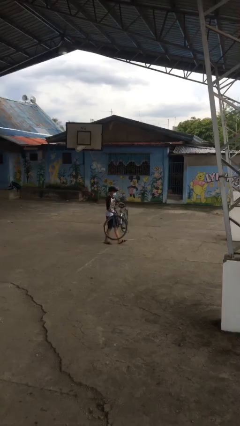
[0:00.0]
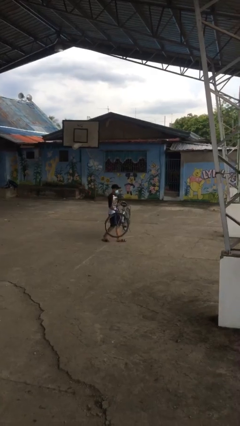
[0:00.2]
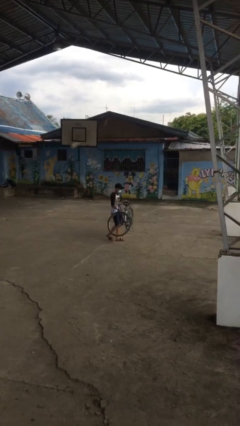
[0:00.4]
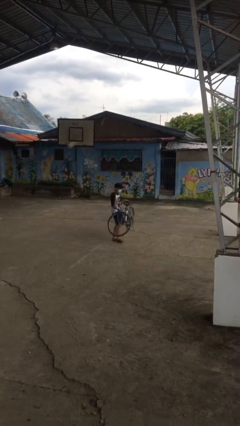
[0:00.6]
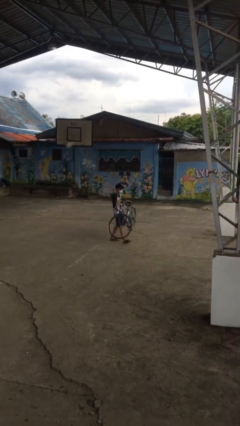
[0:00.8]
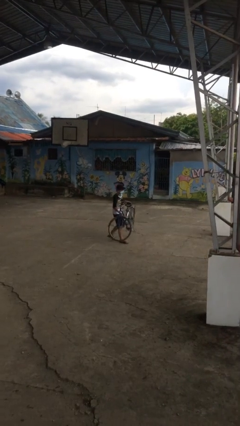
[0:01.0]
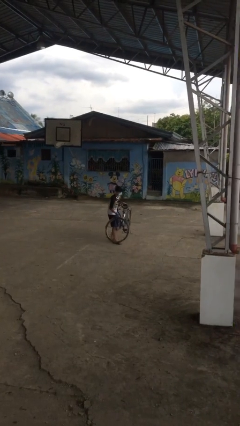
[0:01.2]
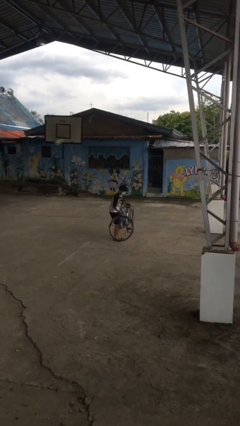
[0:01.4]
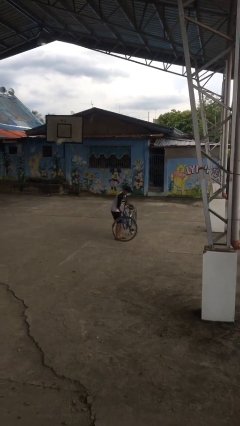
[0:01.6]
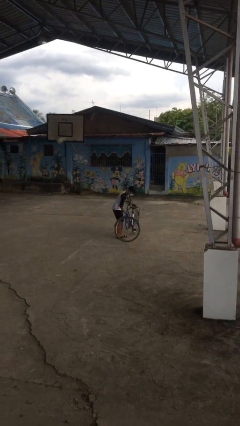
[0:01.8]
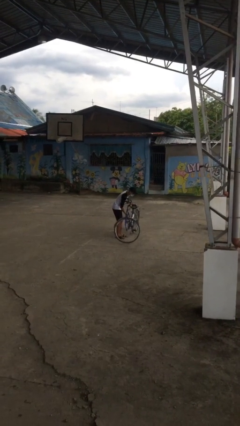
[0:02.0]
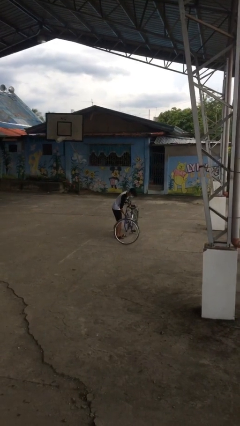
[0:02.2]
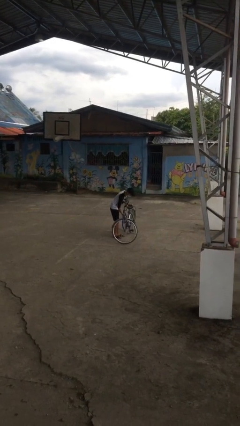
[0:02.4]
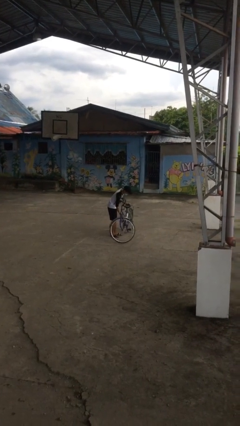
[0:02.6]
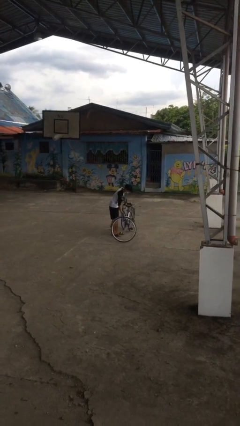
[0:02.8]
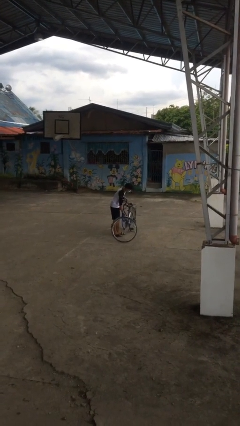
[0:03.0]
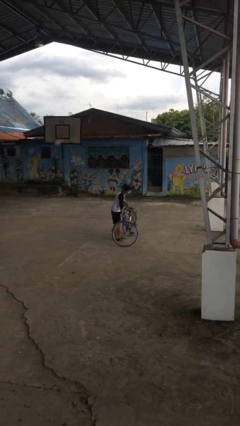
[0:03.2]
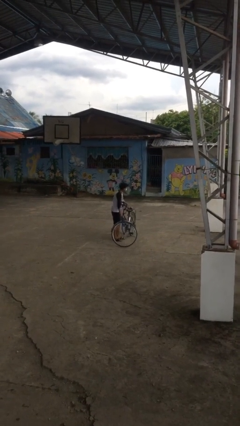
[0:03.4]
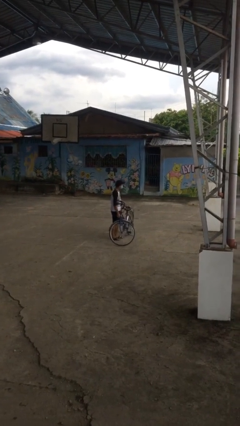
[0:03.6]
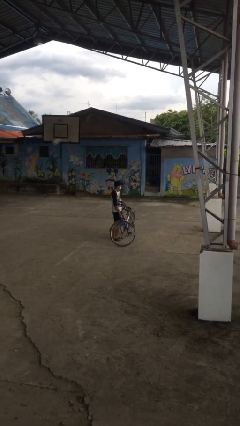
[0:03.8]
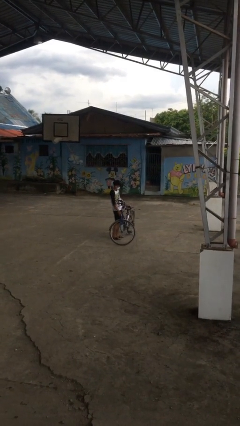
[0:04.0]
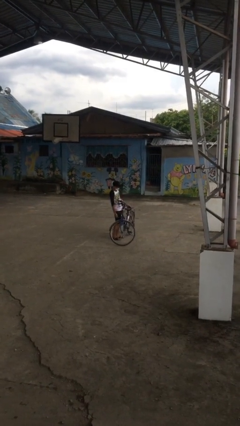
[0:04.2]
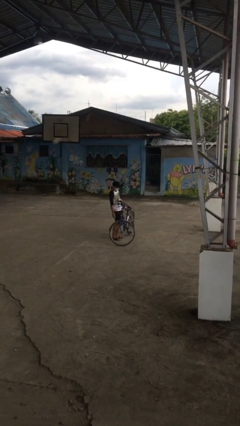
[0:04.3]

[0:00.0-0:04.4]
person puts down object on floor

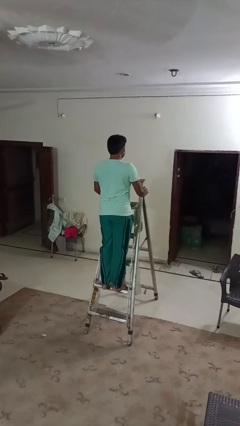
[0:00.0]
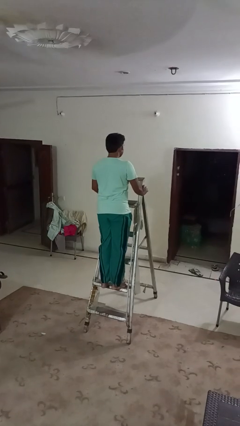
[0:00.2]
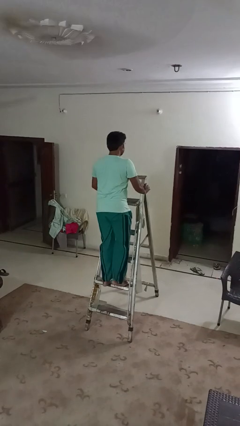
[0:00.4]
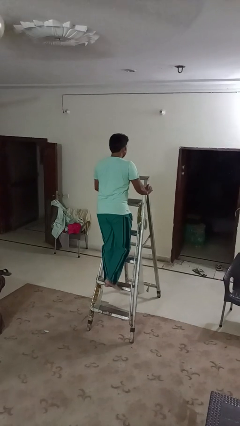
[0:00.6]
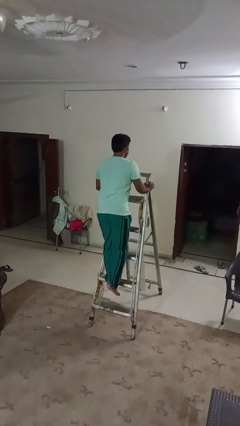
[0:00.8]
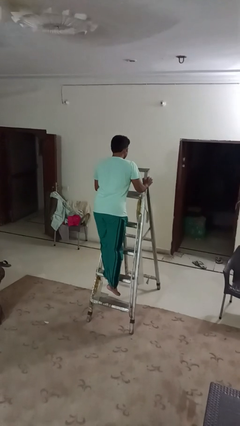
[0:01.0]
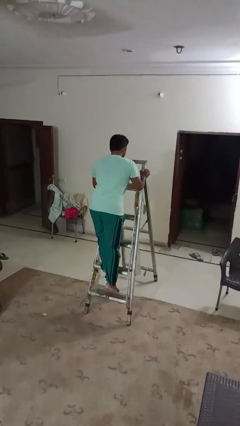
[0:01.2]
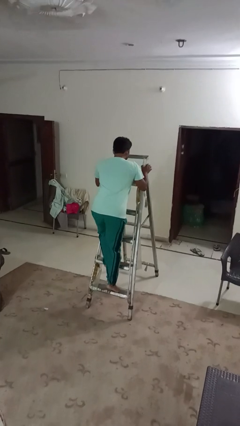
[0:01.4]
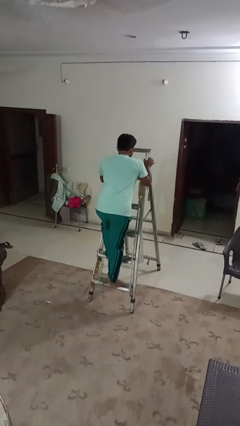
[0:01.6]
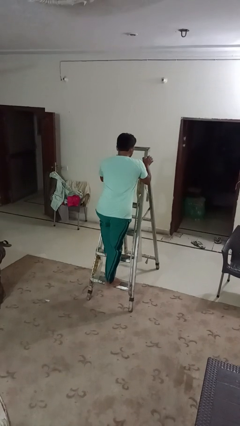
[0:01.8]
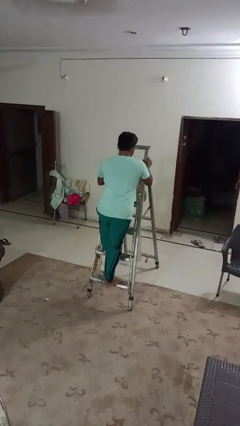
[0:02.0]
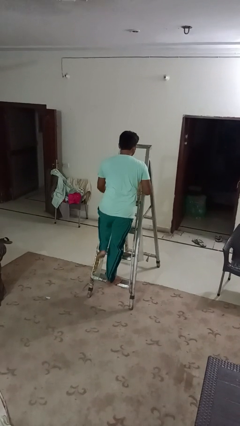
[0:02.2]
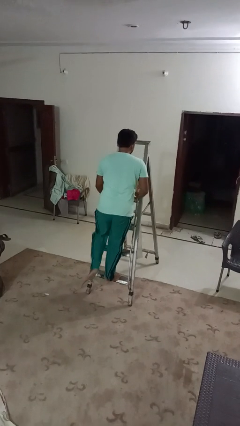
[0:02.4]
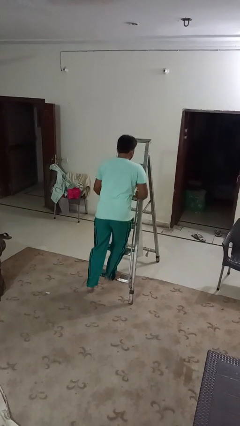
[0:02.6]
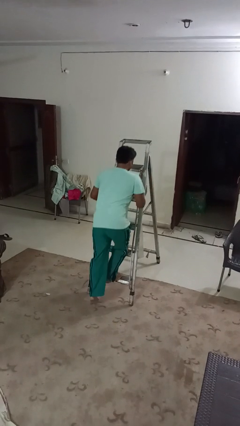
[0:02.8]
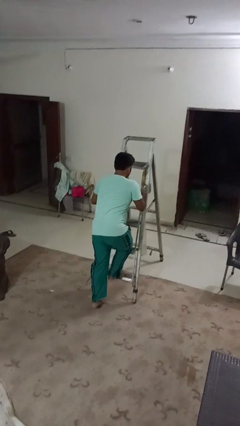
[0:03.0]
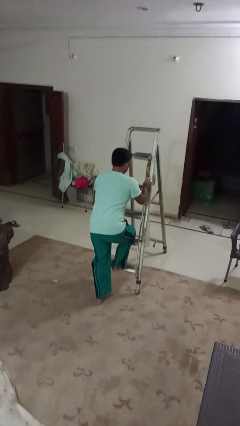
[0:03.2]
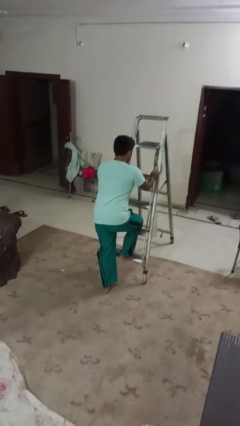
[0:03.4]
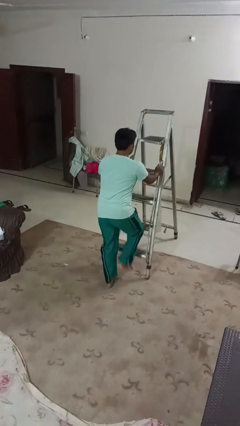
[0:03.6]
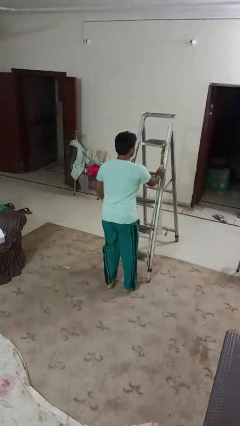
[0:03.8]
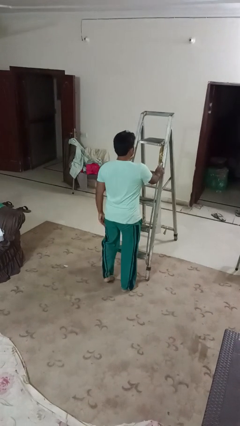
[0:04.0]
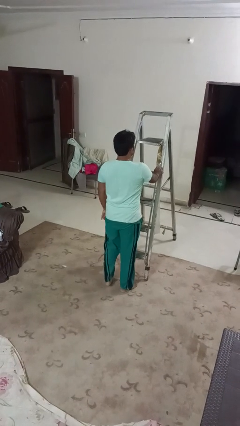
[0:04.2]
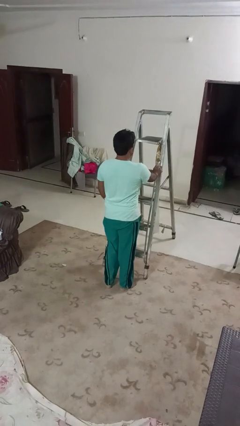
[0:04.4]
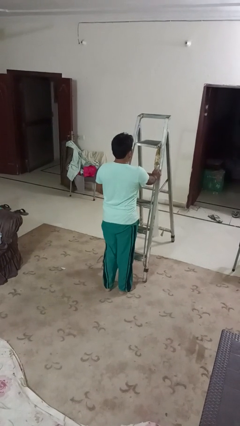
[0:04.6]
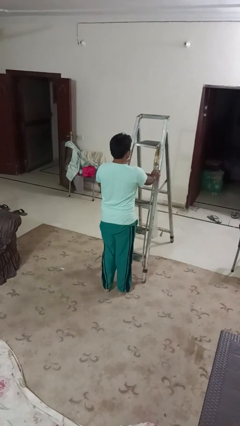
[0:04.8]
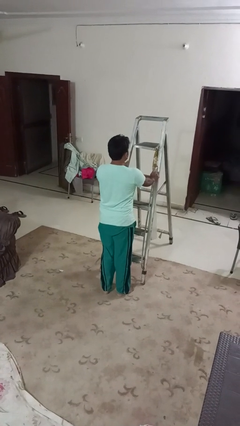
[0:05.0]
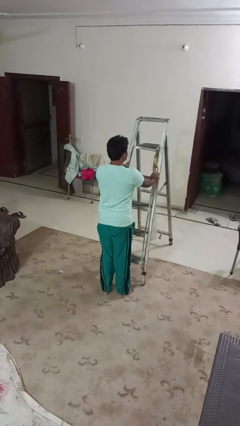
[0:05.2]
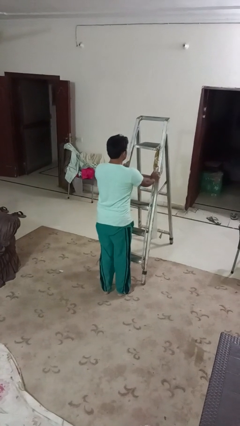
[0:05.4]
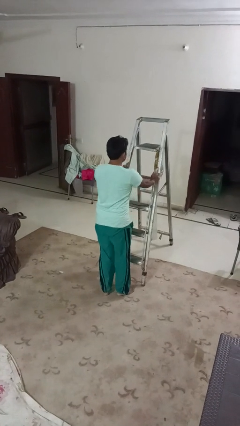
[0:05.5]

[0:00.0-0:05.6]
person climbs down ladder

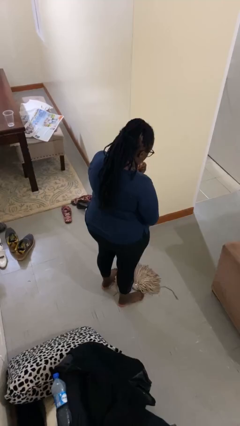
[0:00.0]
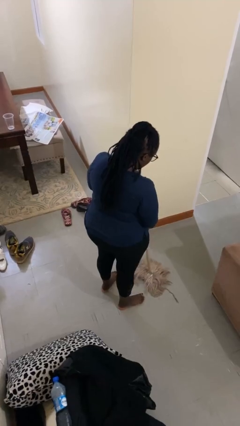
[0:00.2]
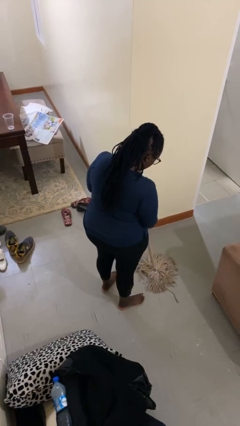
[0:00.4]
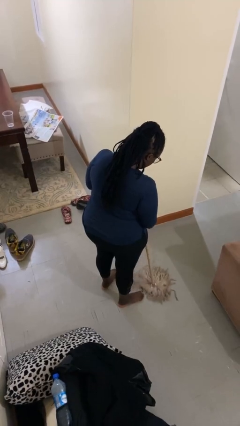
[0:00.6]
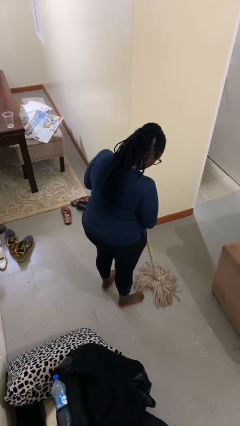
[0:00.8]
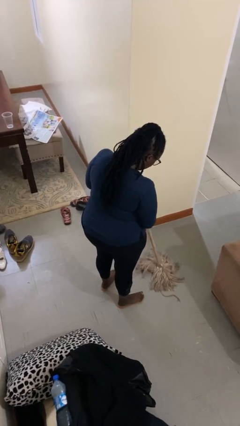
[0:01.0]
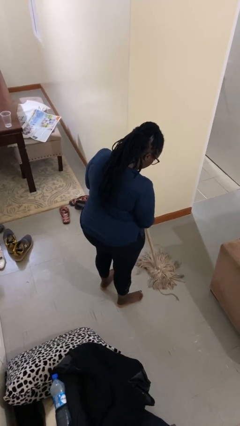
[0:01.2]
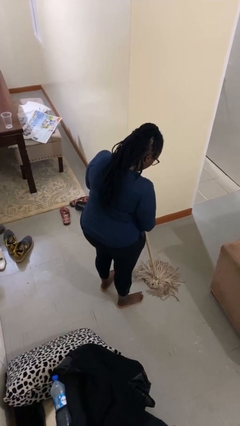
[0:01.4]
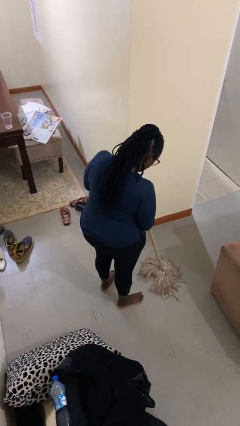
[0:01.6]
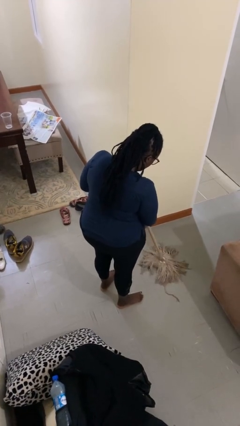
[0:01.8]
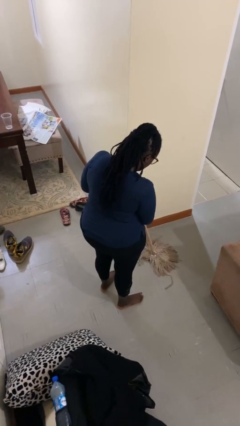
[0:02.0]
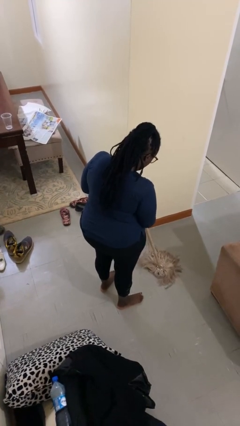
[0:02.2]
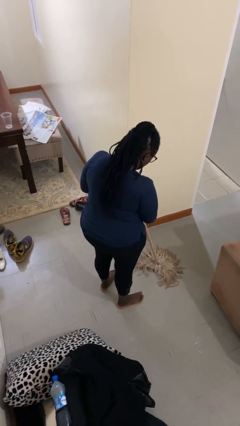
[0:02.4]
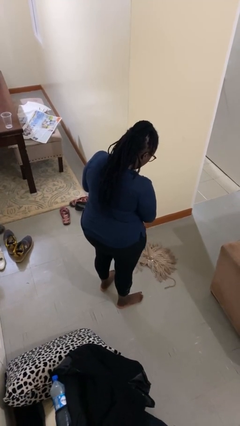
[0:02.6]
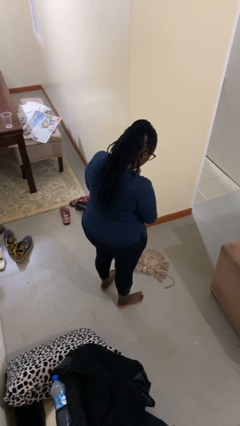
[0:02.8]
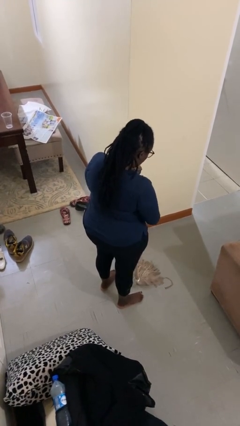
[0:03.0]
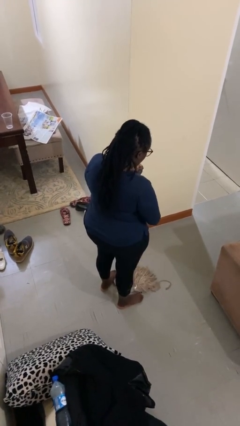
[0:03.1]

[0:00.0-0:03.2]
person mops

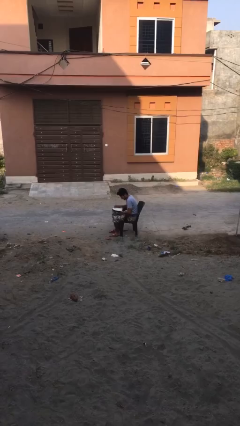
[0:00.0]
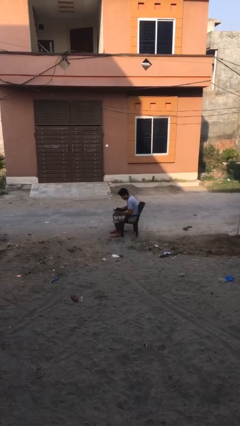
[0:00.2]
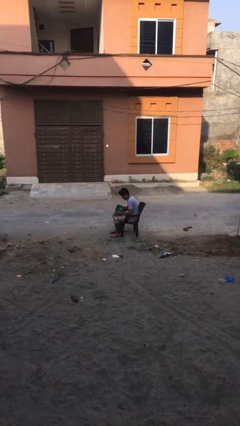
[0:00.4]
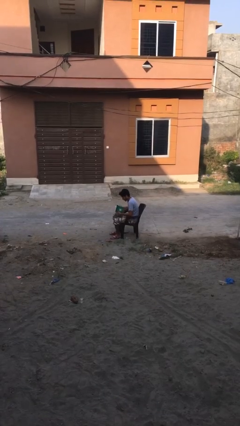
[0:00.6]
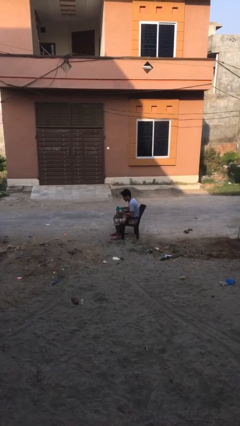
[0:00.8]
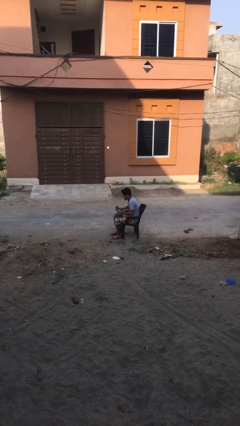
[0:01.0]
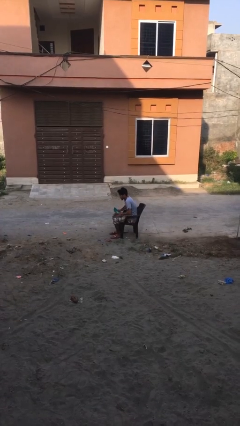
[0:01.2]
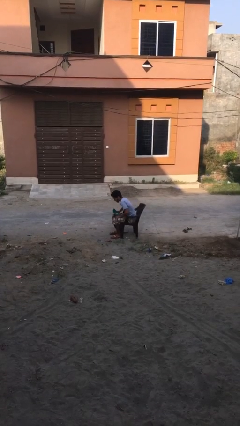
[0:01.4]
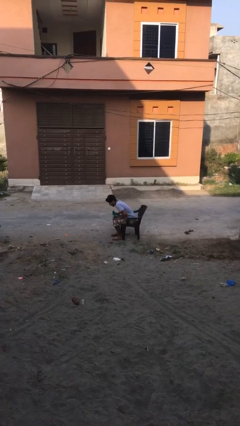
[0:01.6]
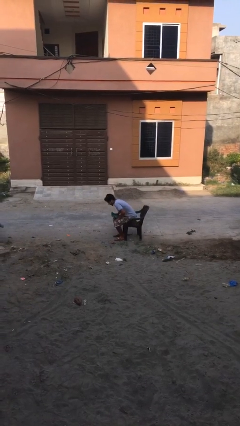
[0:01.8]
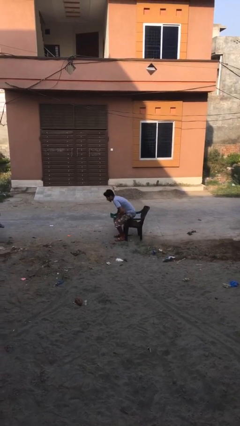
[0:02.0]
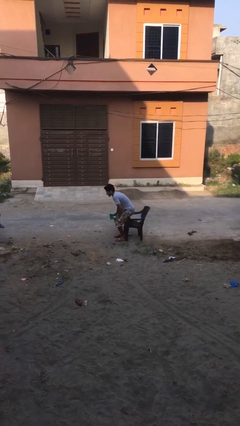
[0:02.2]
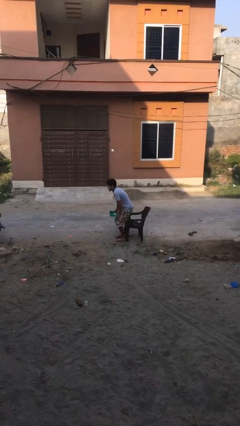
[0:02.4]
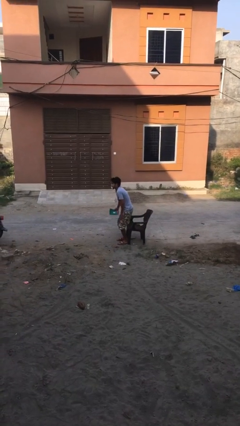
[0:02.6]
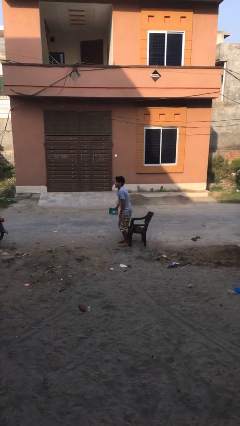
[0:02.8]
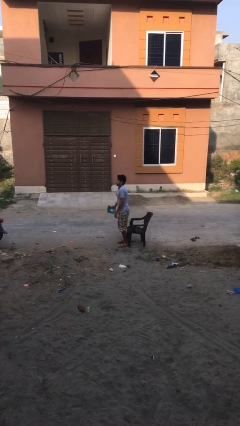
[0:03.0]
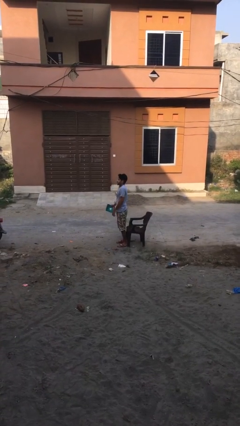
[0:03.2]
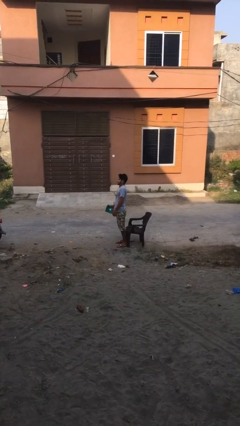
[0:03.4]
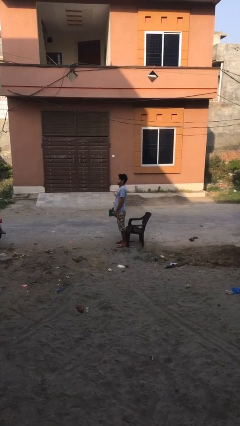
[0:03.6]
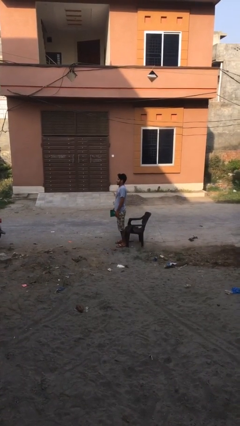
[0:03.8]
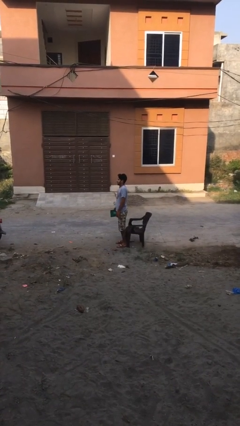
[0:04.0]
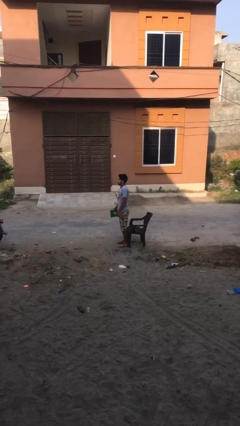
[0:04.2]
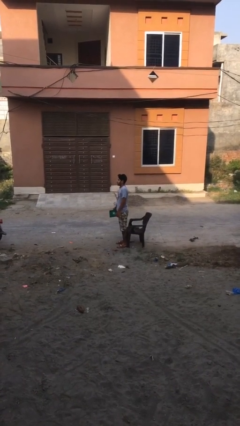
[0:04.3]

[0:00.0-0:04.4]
person stands up
